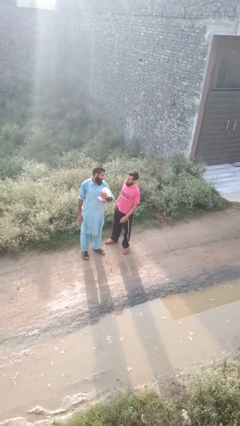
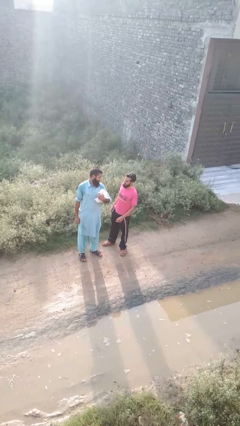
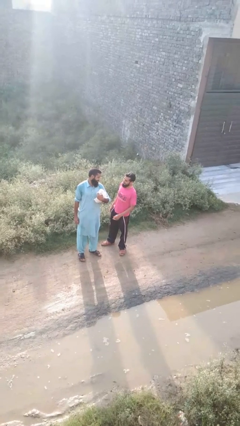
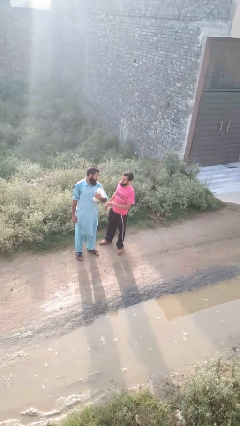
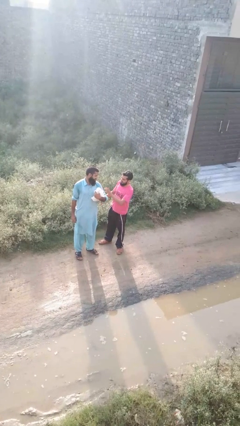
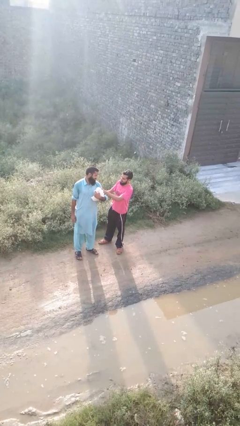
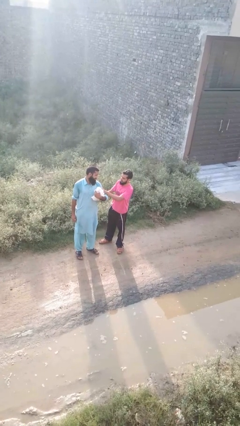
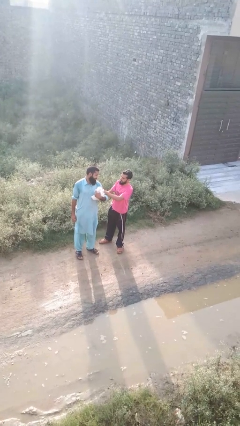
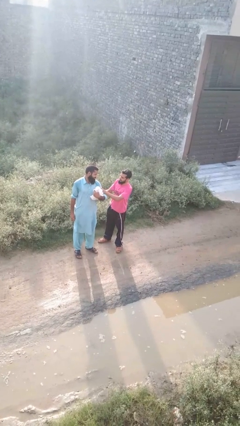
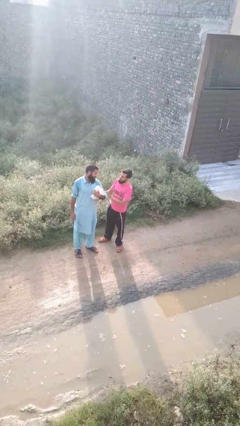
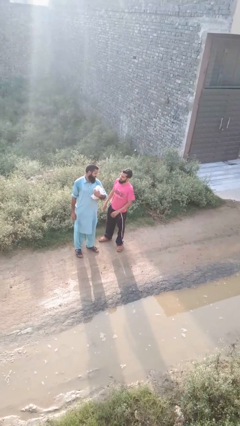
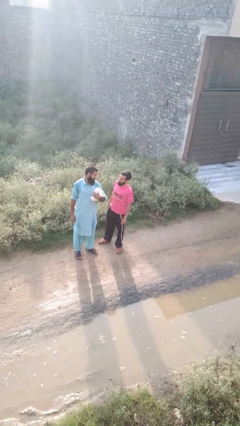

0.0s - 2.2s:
person grabs person by bicep

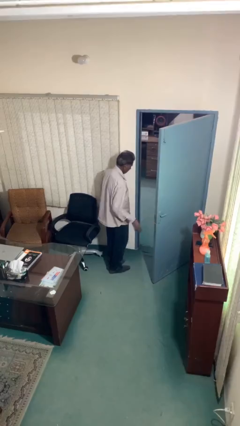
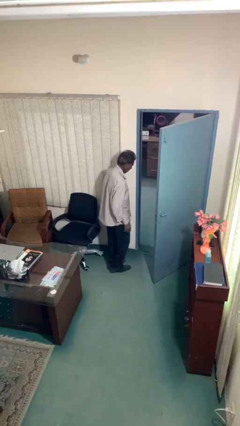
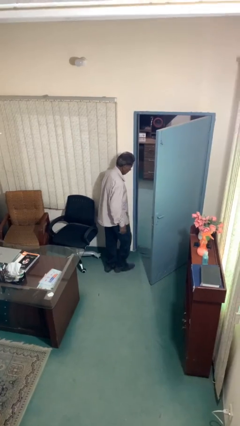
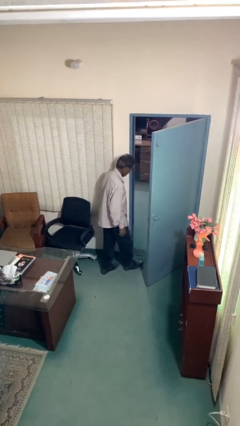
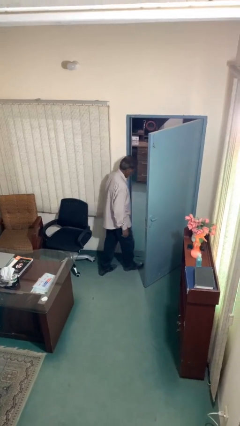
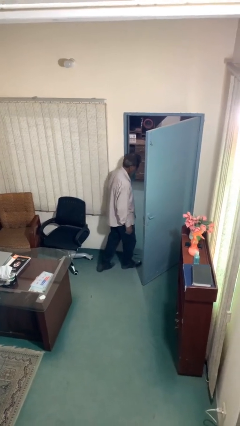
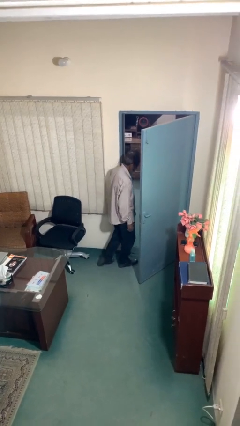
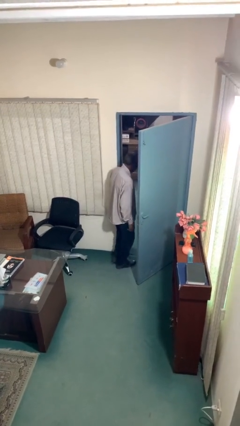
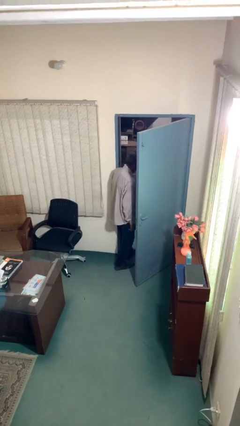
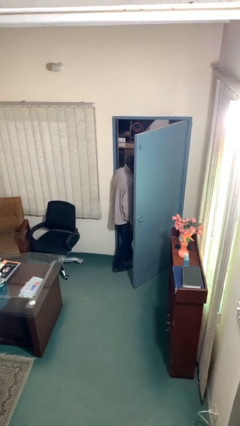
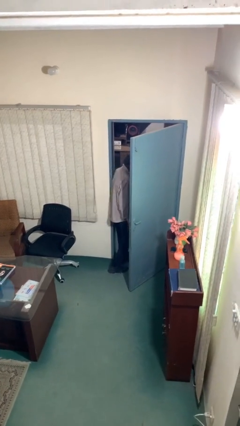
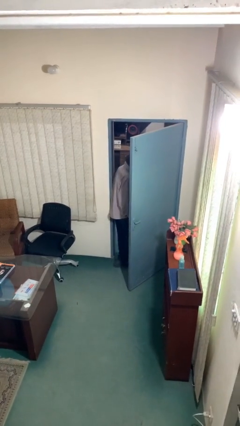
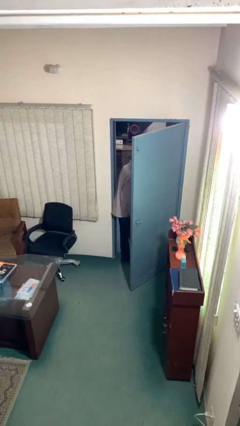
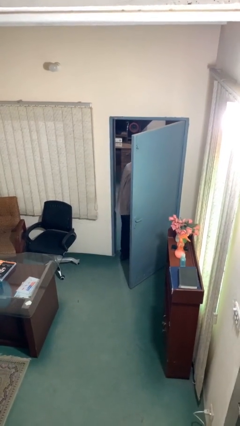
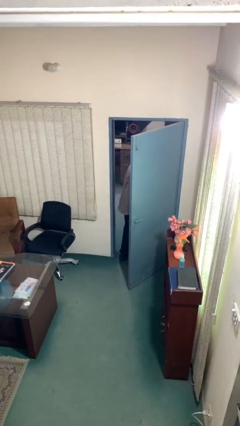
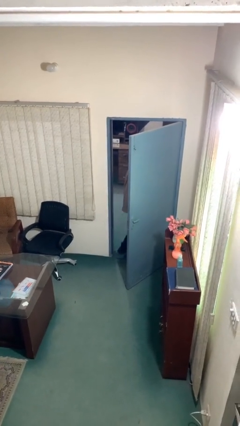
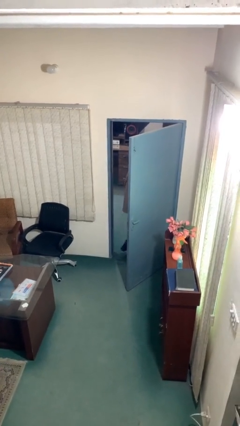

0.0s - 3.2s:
person exits scene through structure

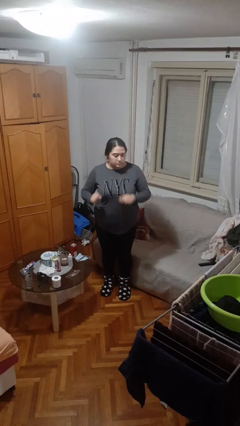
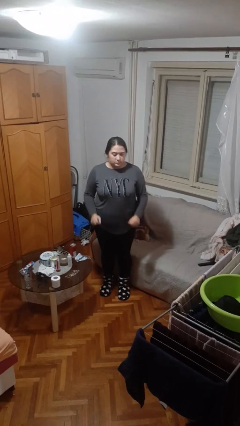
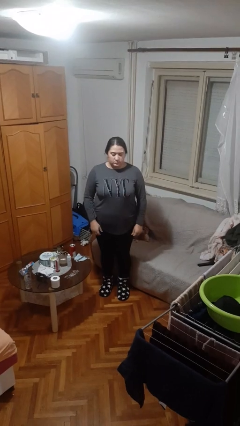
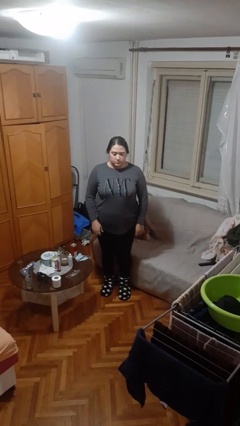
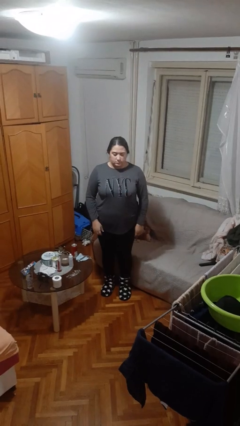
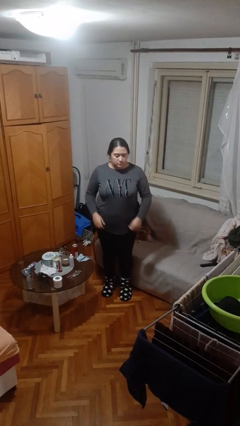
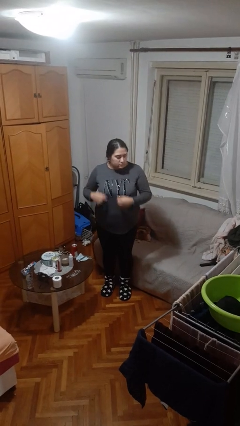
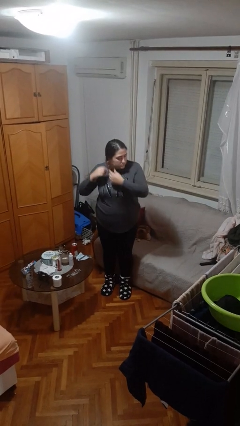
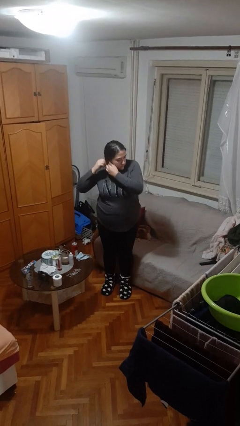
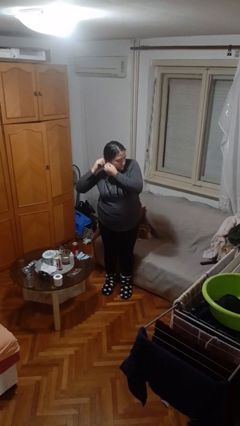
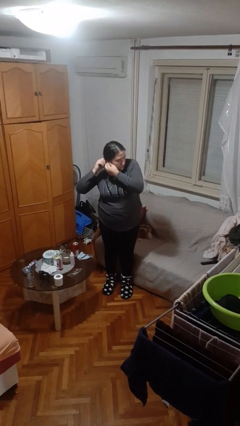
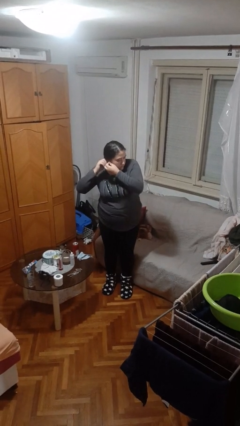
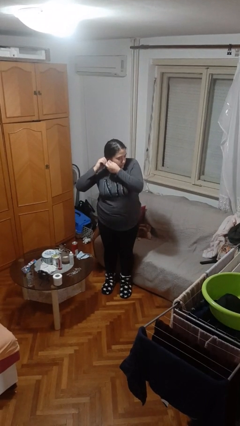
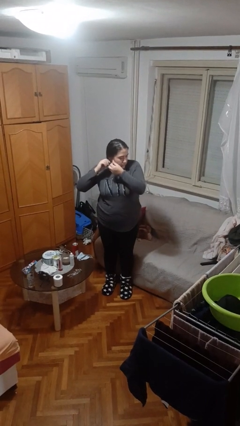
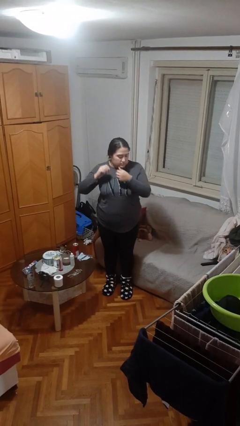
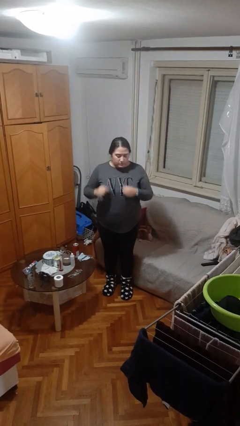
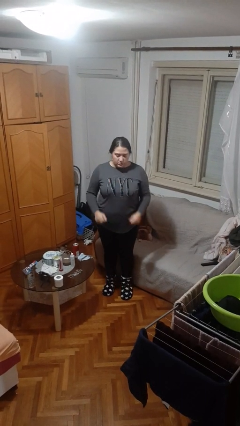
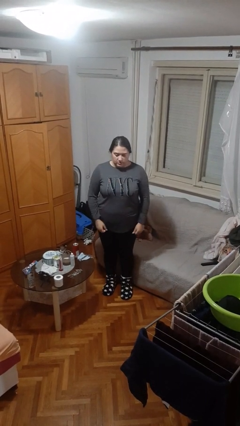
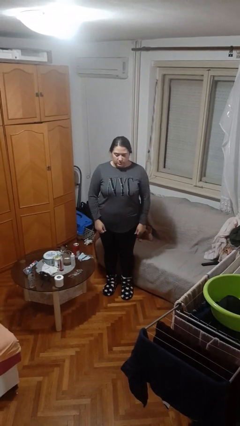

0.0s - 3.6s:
person takes off earrings

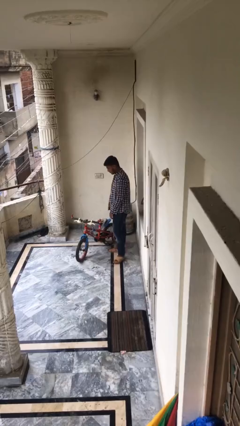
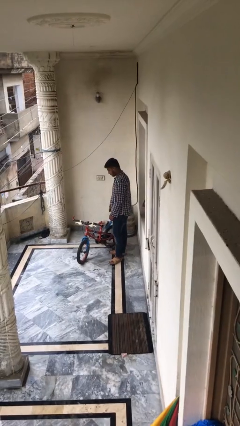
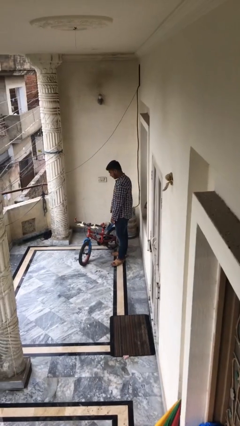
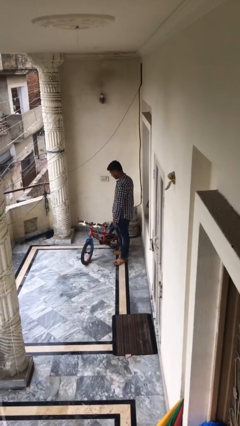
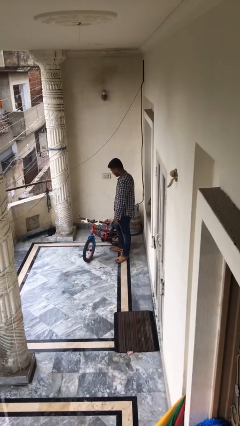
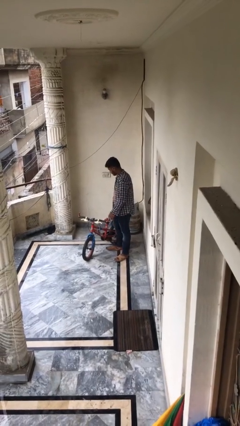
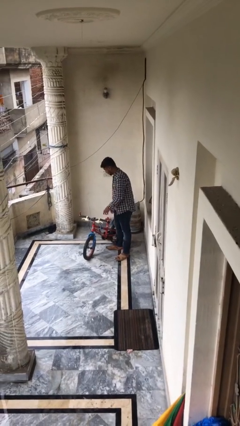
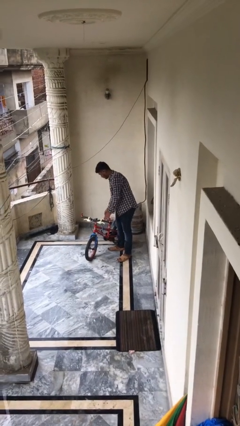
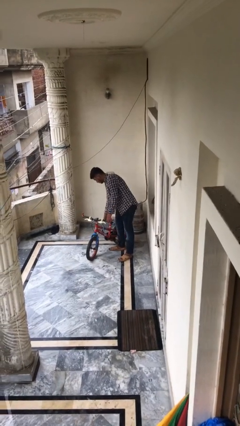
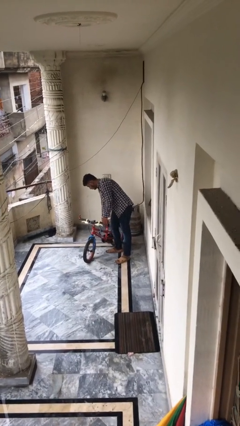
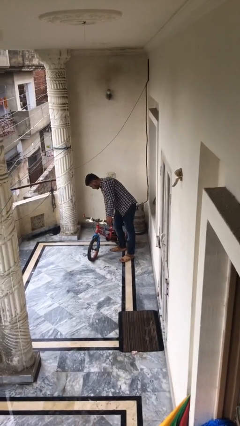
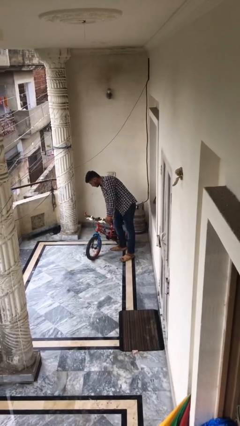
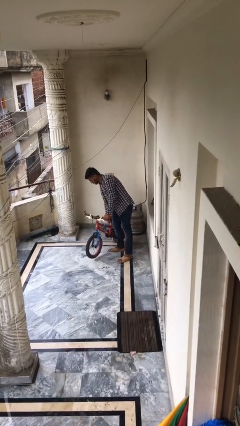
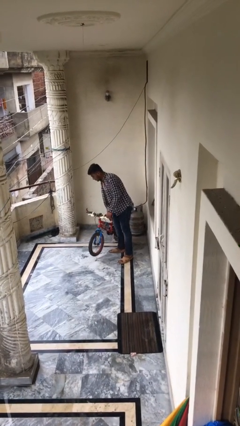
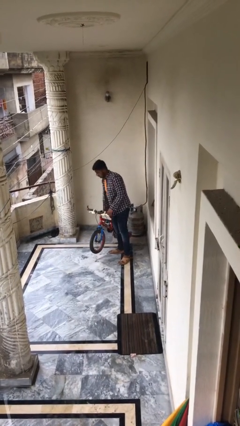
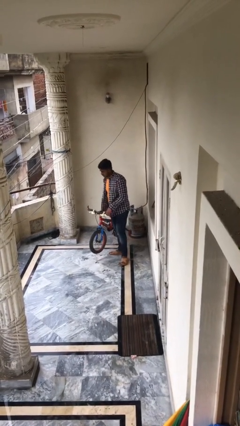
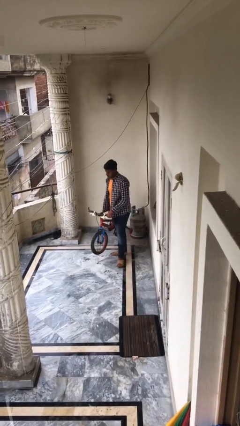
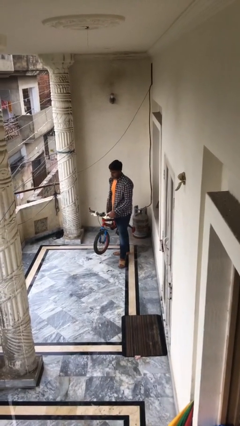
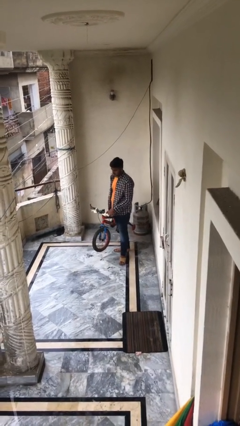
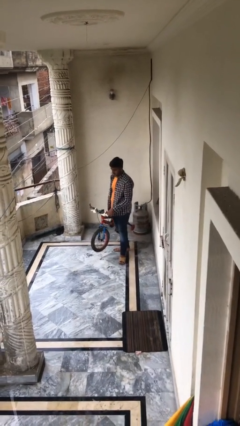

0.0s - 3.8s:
person picks up object from floor

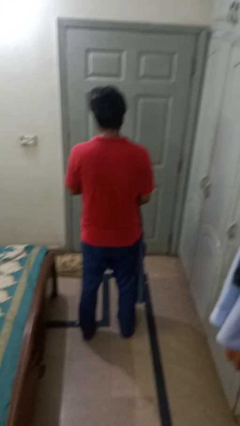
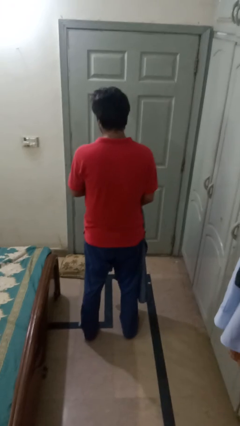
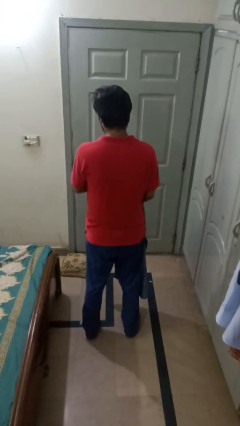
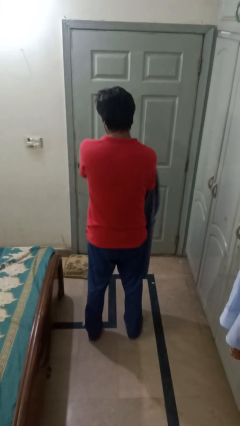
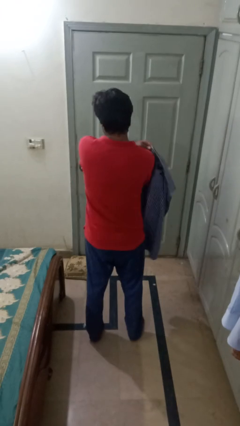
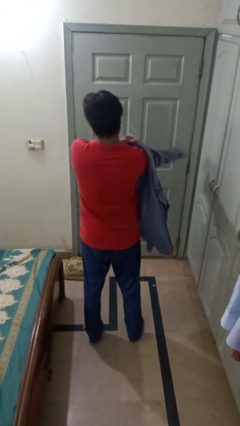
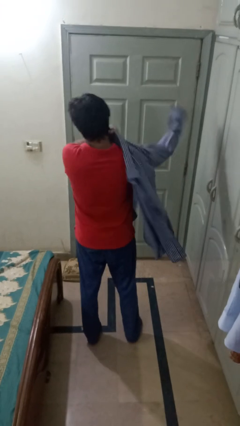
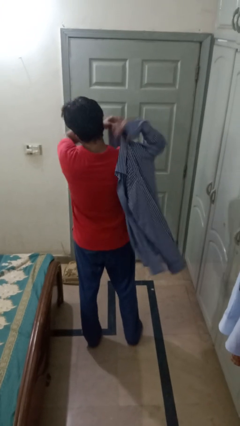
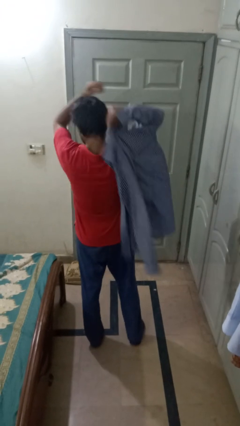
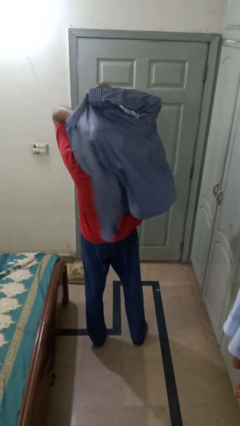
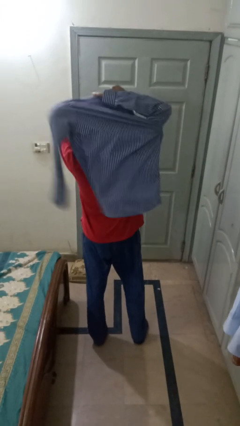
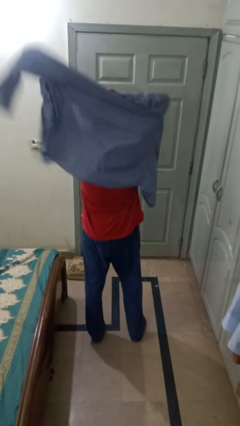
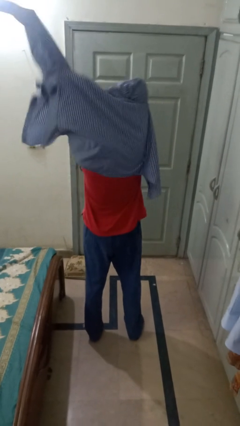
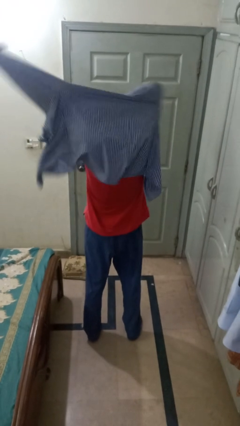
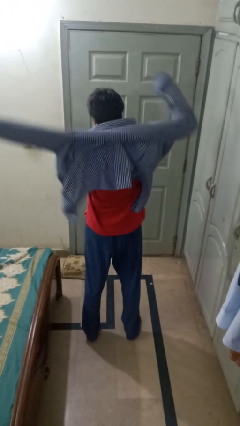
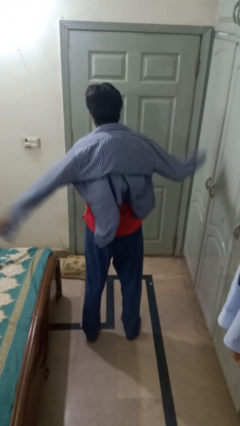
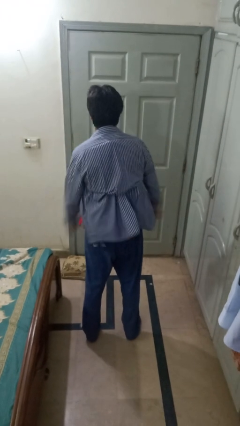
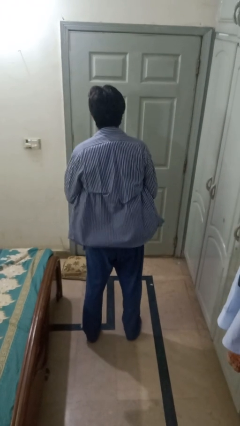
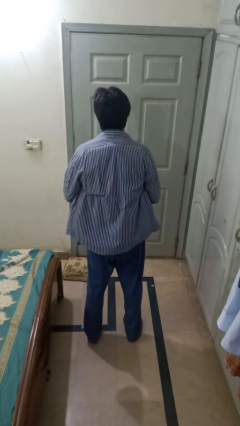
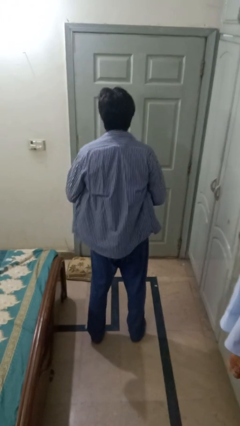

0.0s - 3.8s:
person puts on shirt

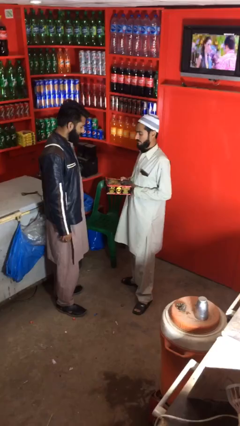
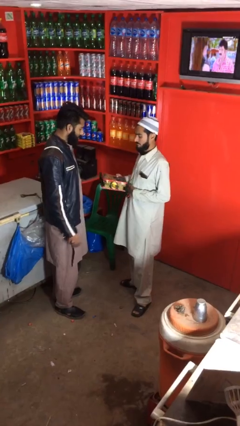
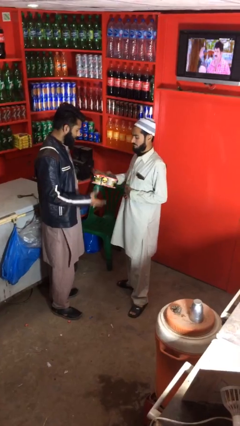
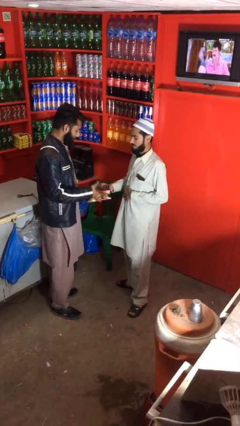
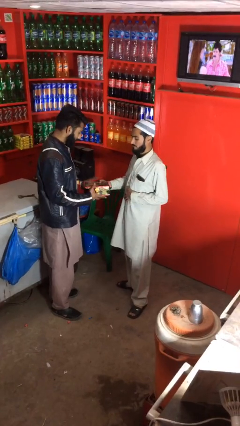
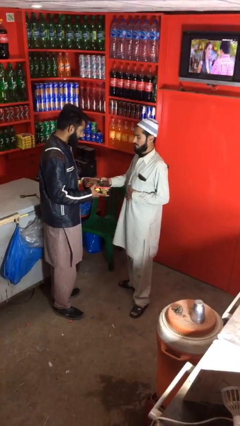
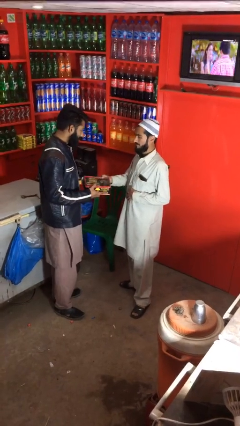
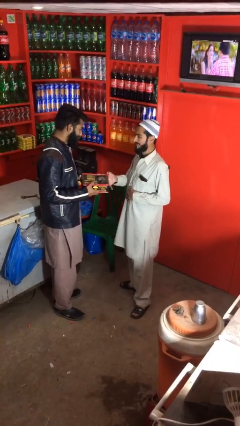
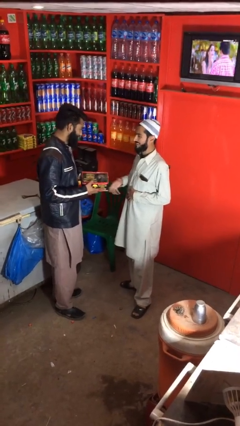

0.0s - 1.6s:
person transfers object to person
